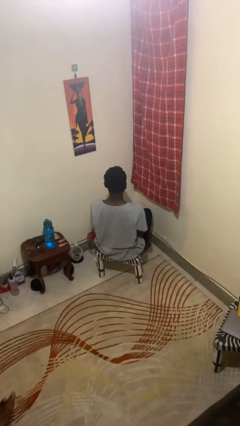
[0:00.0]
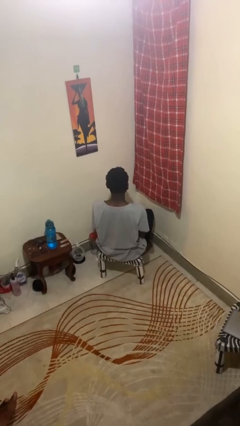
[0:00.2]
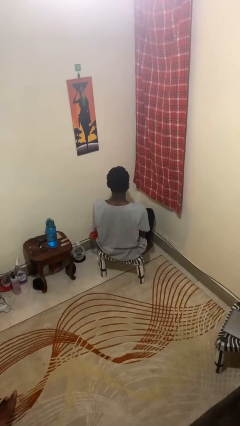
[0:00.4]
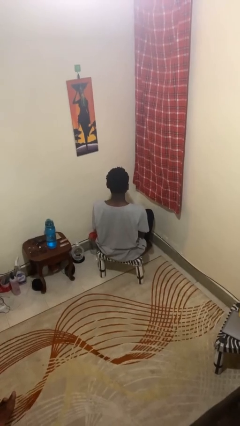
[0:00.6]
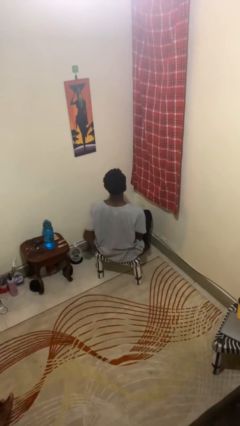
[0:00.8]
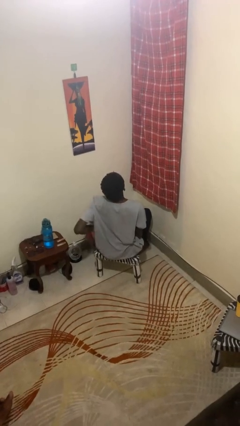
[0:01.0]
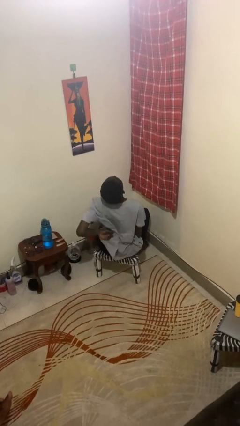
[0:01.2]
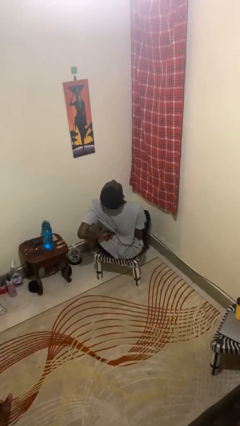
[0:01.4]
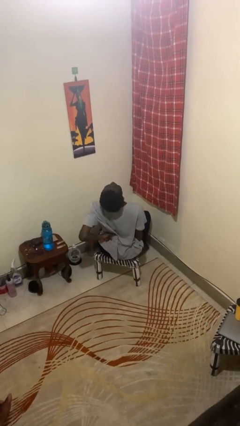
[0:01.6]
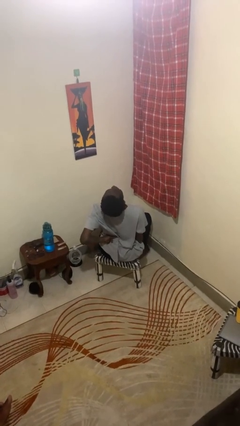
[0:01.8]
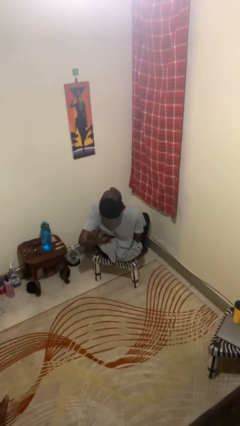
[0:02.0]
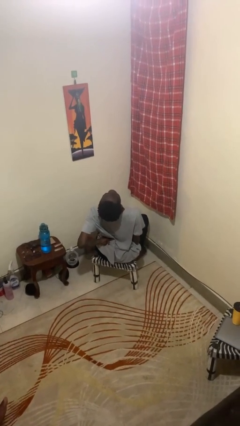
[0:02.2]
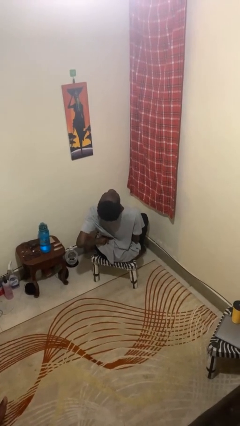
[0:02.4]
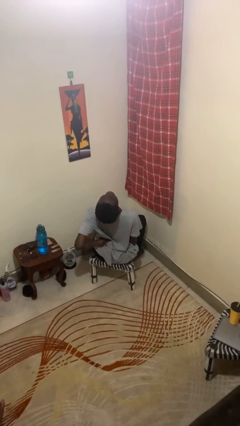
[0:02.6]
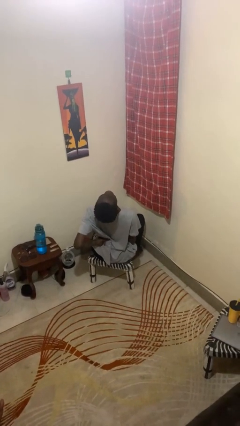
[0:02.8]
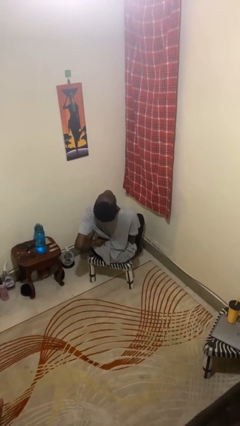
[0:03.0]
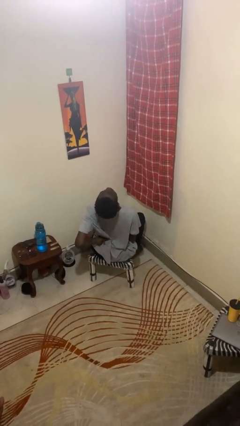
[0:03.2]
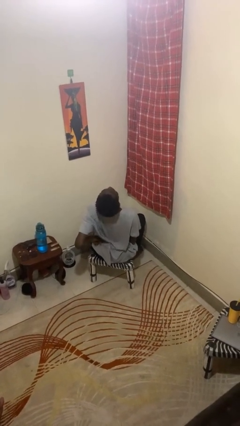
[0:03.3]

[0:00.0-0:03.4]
person stretches back

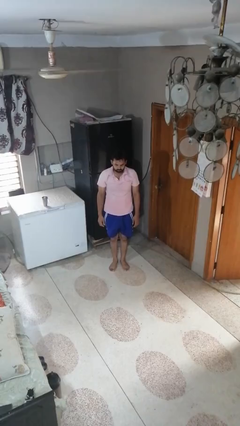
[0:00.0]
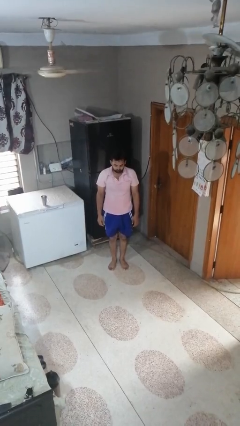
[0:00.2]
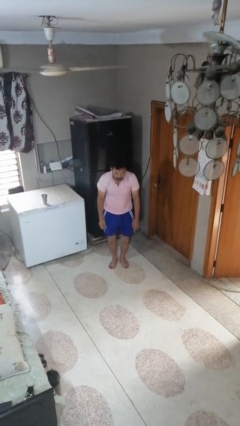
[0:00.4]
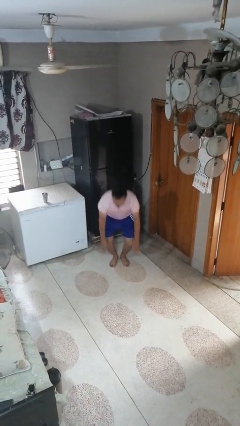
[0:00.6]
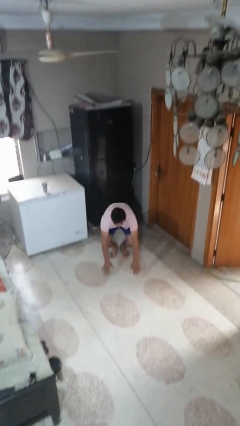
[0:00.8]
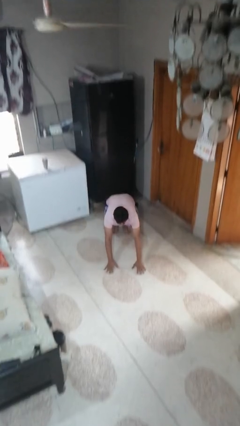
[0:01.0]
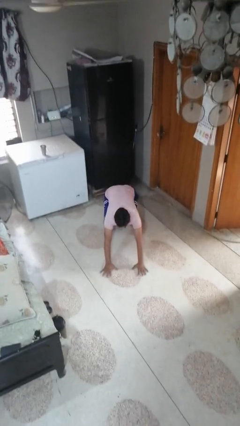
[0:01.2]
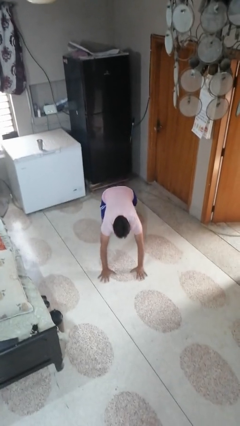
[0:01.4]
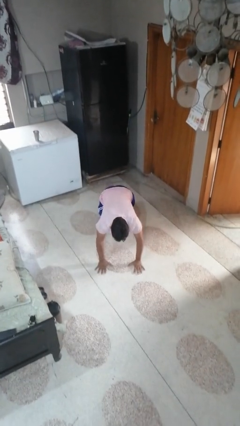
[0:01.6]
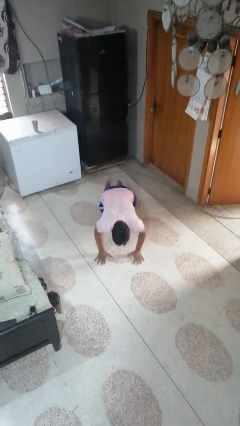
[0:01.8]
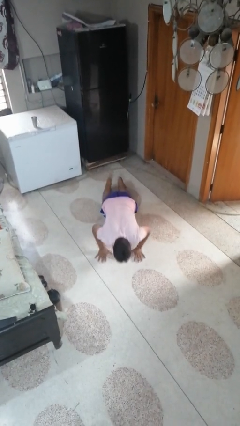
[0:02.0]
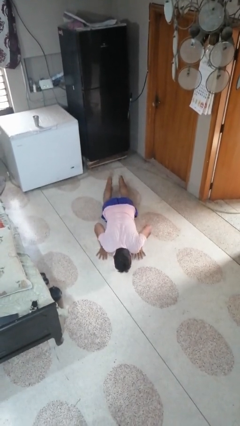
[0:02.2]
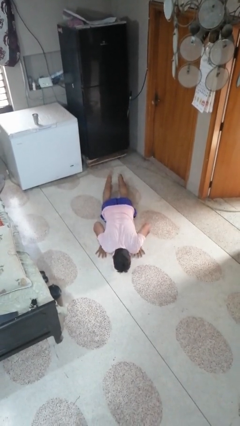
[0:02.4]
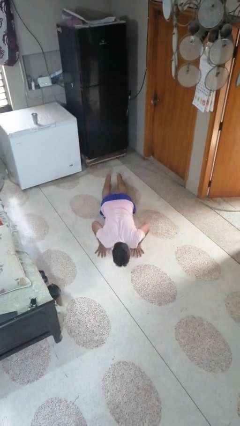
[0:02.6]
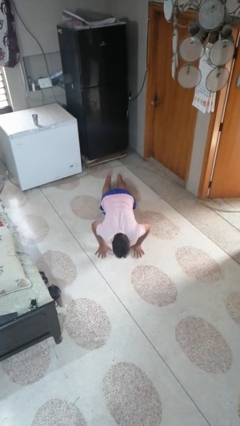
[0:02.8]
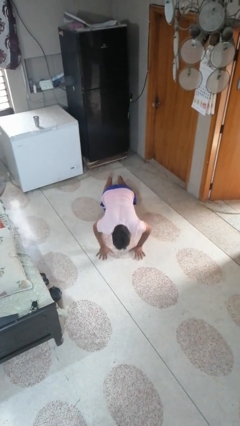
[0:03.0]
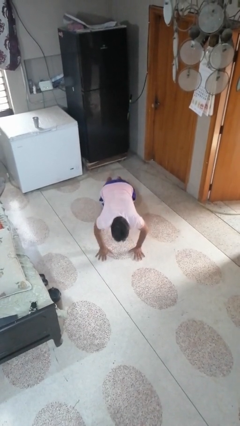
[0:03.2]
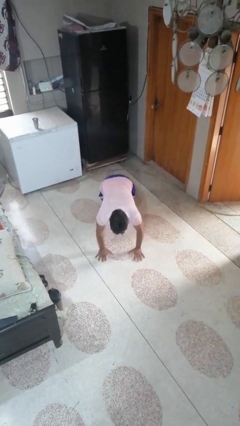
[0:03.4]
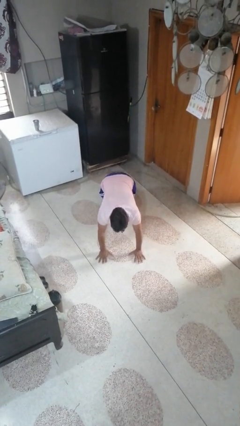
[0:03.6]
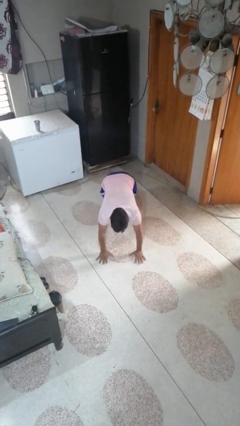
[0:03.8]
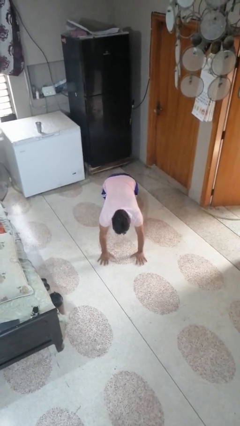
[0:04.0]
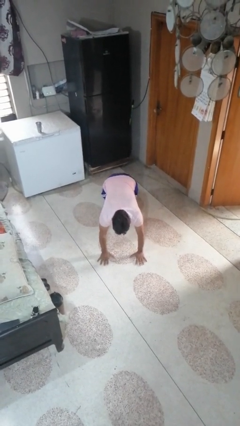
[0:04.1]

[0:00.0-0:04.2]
person exercises with pushup

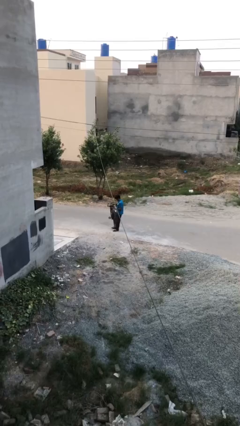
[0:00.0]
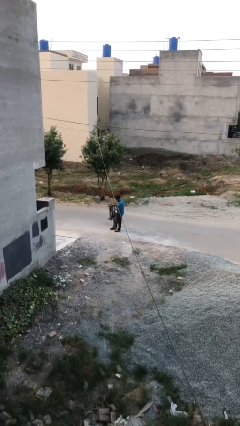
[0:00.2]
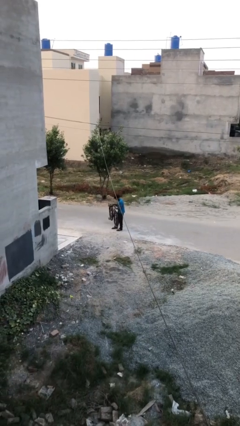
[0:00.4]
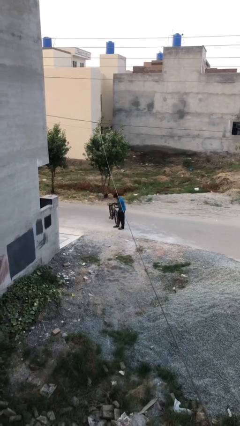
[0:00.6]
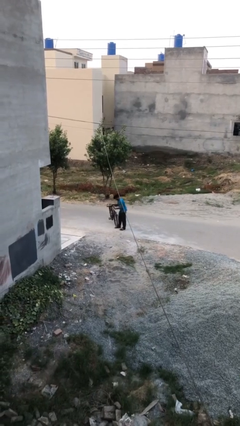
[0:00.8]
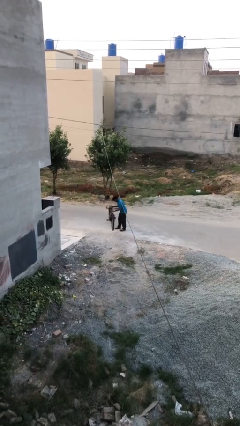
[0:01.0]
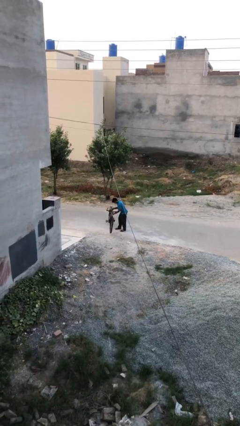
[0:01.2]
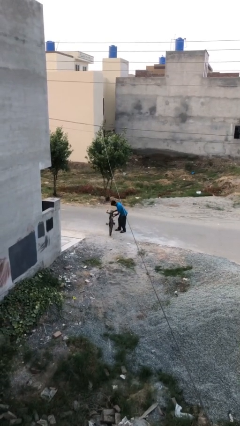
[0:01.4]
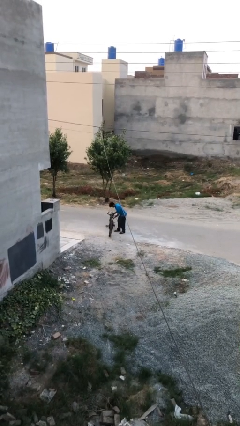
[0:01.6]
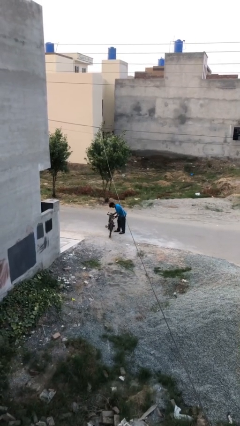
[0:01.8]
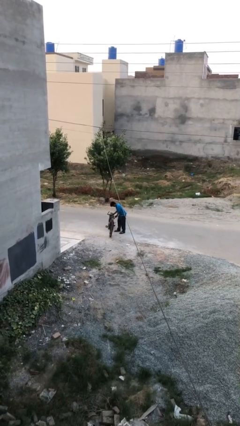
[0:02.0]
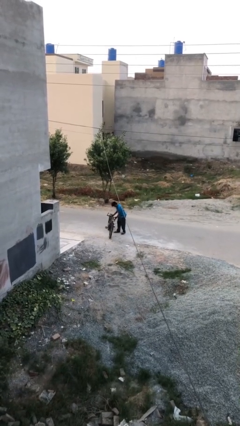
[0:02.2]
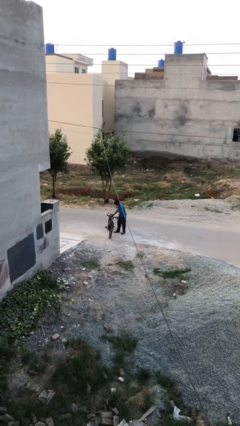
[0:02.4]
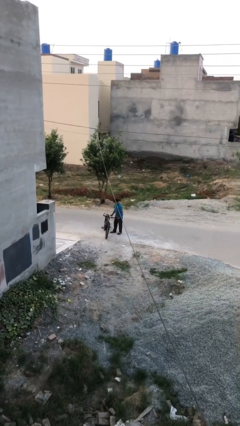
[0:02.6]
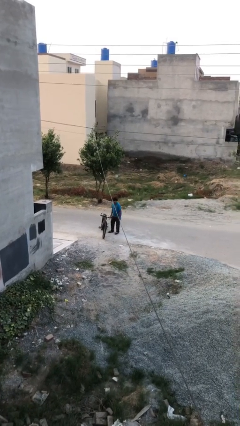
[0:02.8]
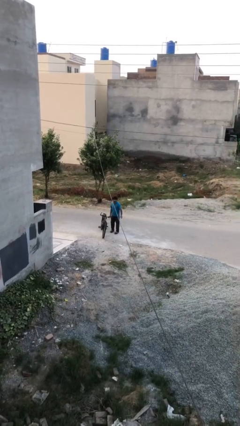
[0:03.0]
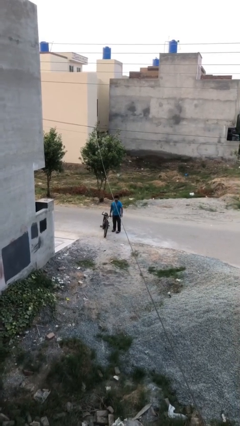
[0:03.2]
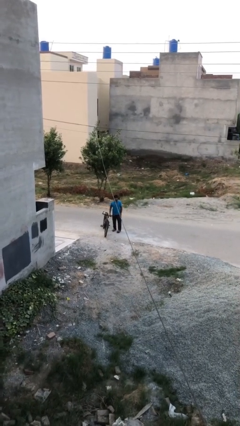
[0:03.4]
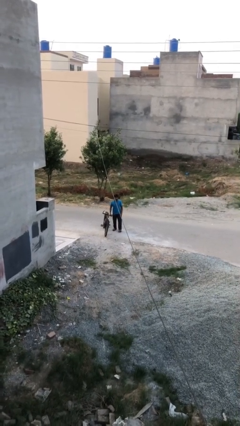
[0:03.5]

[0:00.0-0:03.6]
person puts down object on floor

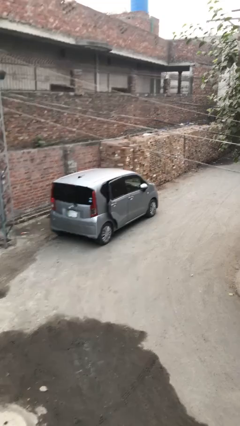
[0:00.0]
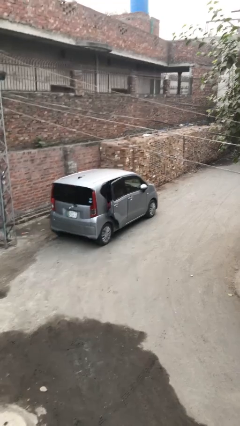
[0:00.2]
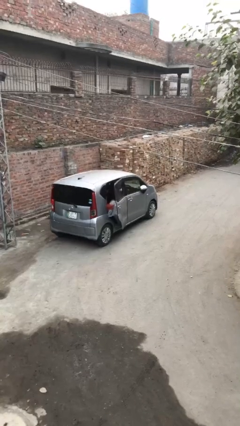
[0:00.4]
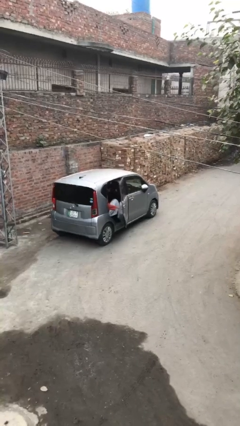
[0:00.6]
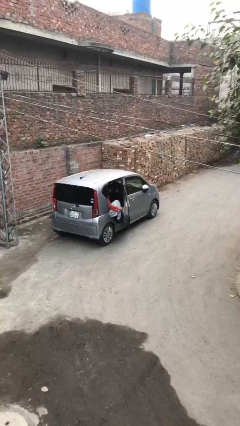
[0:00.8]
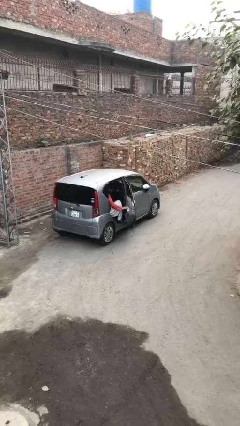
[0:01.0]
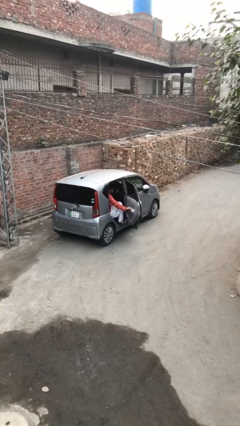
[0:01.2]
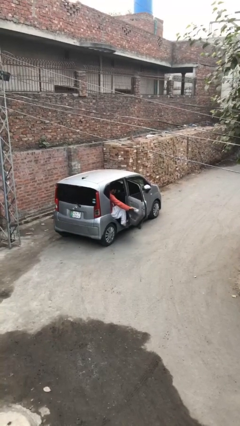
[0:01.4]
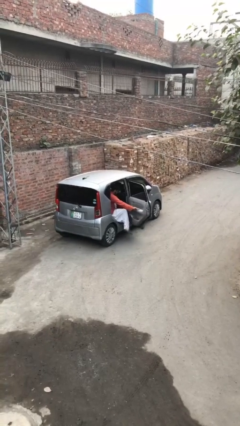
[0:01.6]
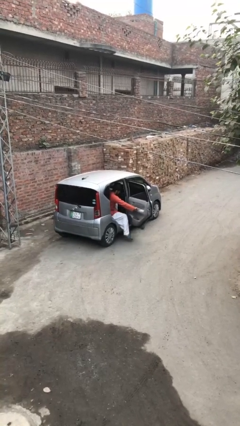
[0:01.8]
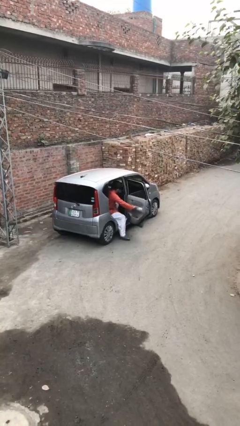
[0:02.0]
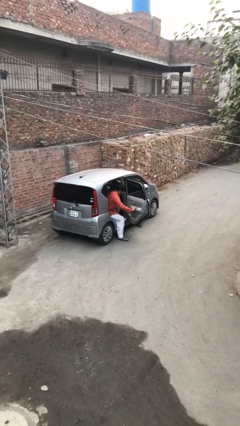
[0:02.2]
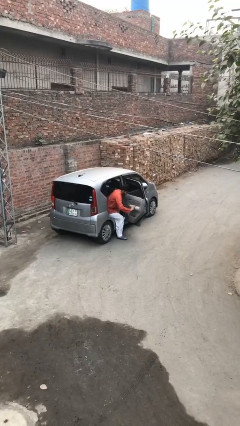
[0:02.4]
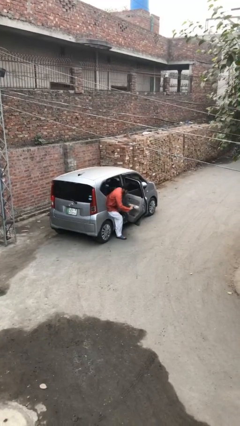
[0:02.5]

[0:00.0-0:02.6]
person opens car door

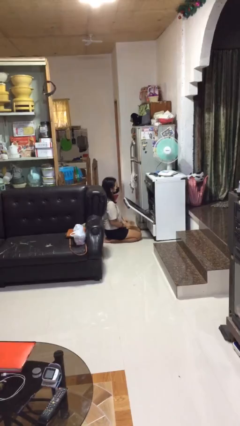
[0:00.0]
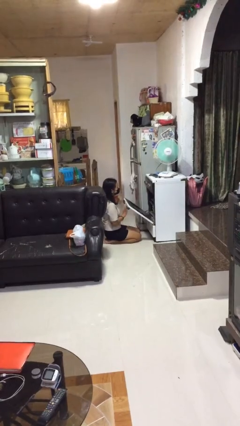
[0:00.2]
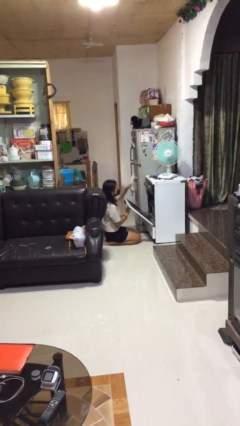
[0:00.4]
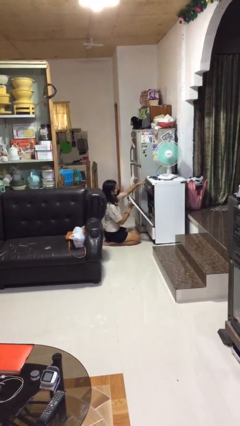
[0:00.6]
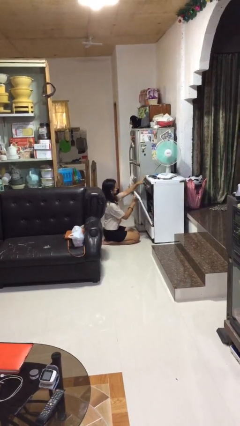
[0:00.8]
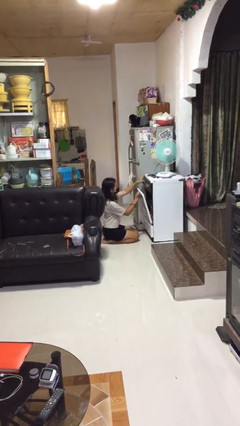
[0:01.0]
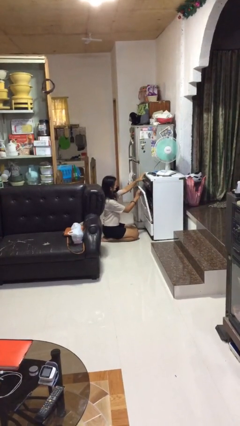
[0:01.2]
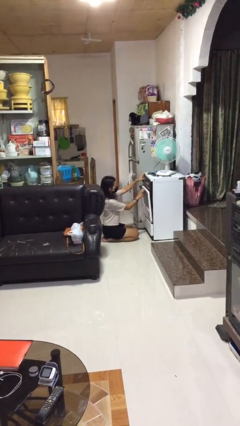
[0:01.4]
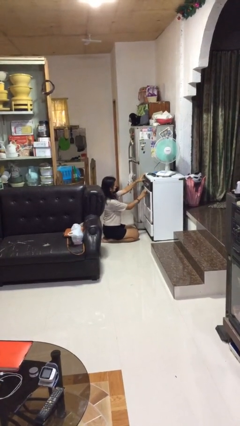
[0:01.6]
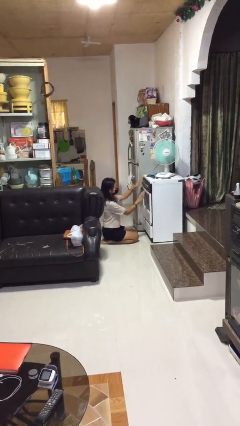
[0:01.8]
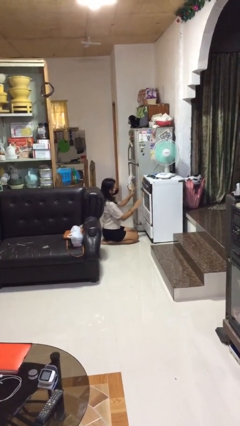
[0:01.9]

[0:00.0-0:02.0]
person closes oven door

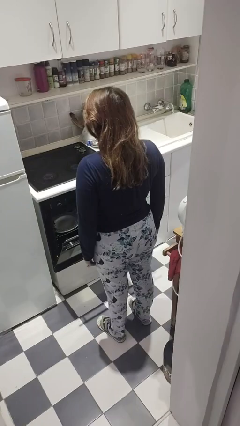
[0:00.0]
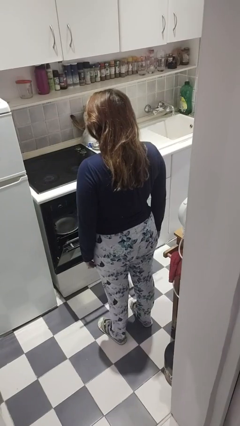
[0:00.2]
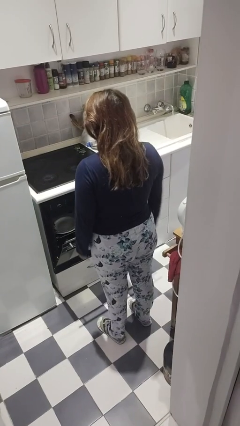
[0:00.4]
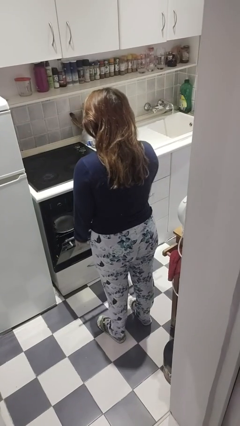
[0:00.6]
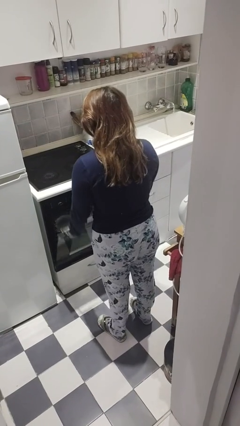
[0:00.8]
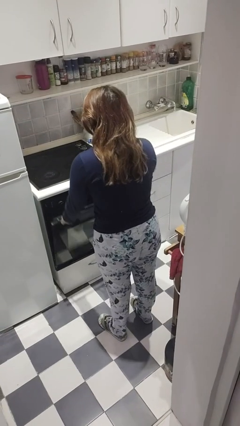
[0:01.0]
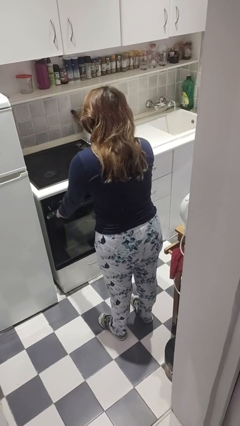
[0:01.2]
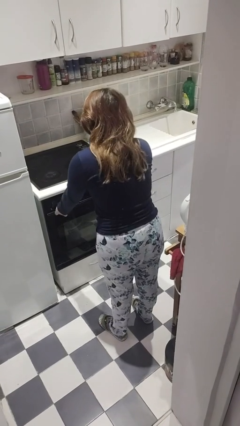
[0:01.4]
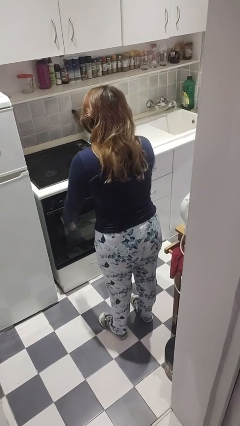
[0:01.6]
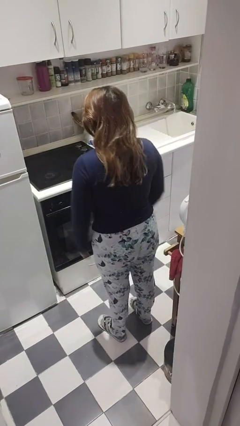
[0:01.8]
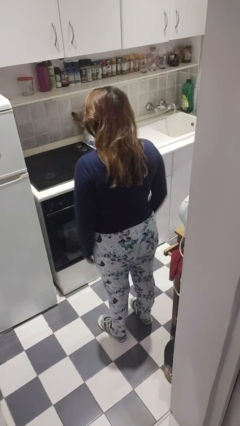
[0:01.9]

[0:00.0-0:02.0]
person closes dishwasher
